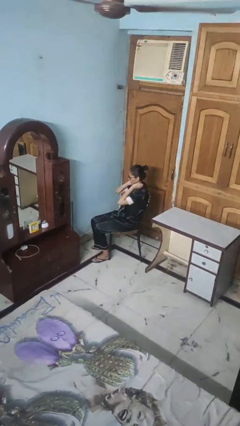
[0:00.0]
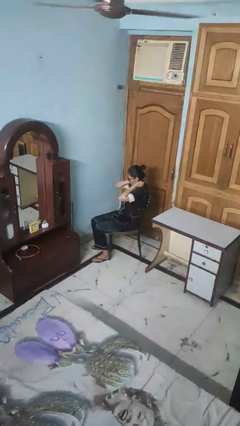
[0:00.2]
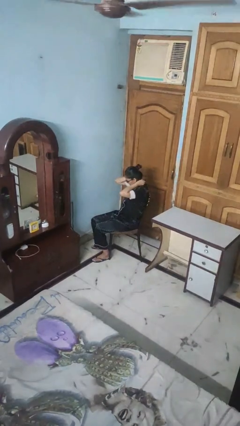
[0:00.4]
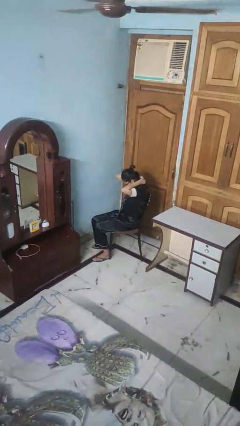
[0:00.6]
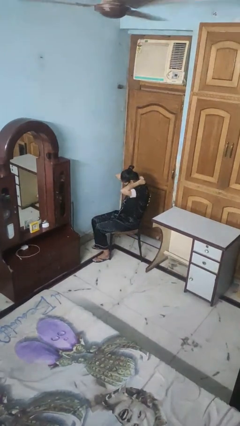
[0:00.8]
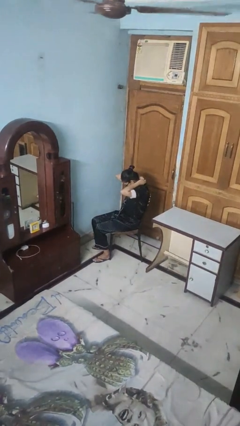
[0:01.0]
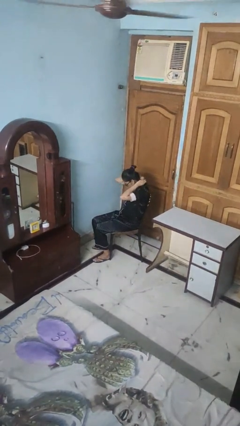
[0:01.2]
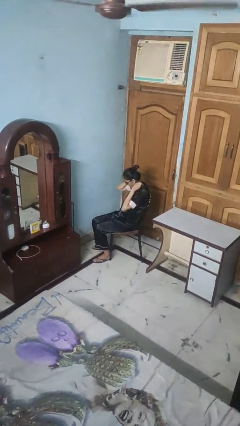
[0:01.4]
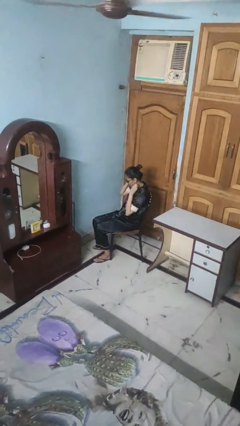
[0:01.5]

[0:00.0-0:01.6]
person takes off necklace

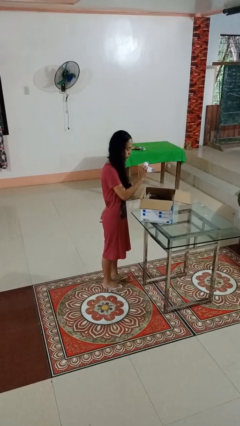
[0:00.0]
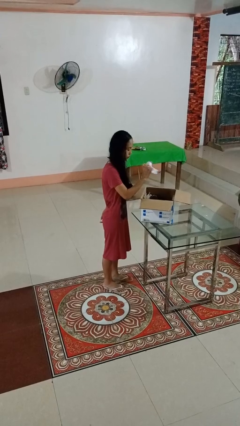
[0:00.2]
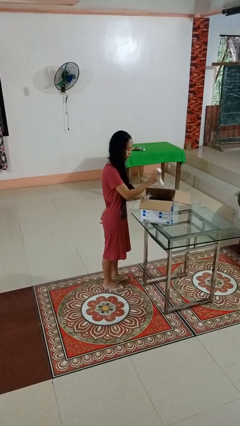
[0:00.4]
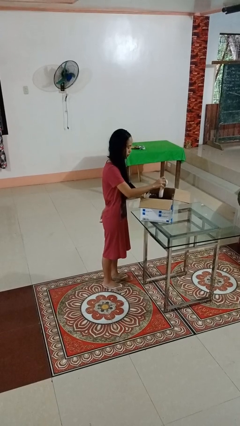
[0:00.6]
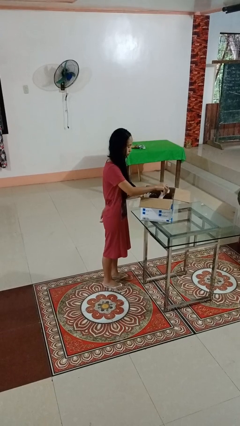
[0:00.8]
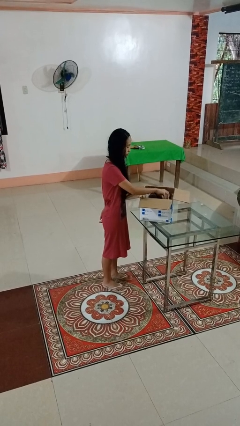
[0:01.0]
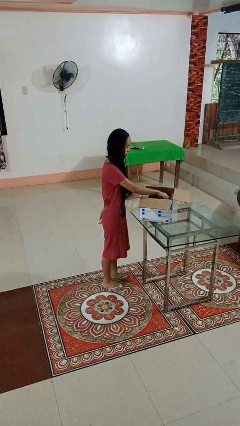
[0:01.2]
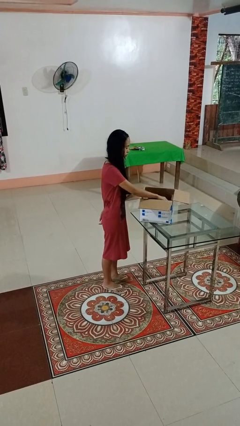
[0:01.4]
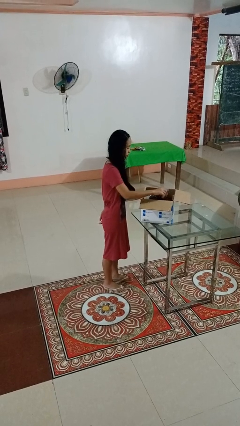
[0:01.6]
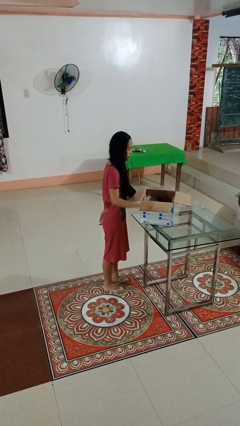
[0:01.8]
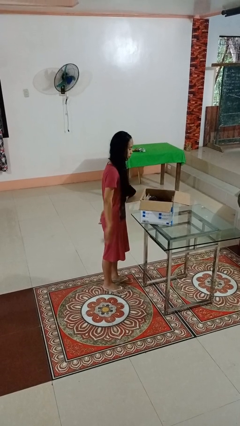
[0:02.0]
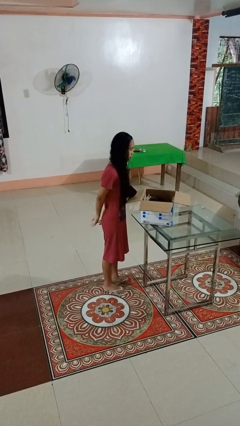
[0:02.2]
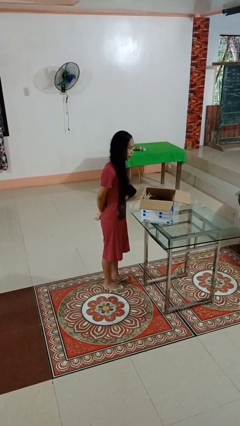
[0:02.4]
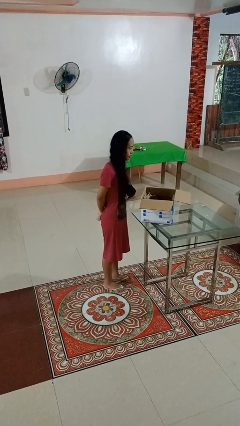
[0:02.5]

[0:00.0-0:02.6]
person puts object into box

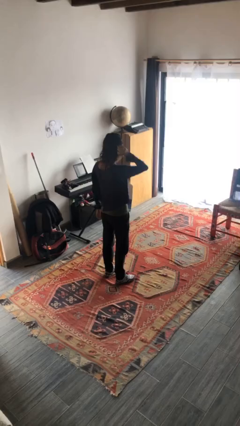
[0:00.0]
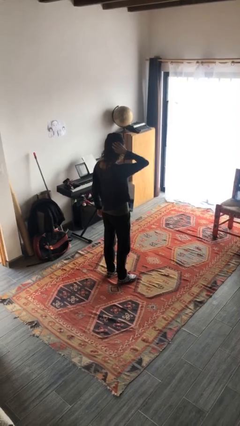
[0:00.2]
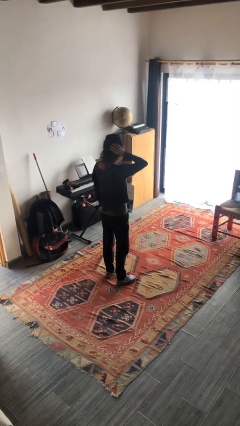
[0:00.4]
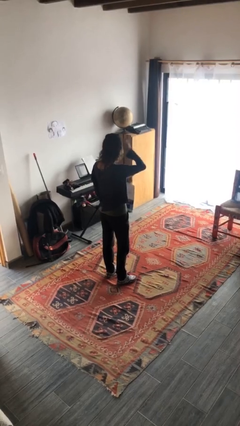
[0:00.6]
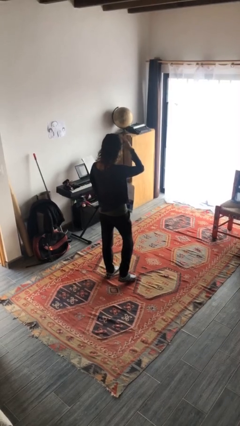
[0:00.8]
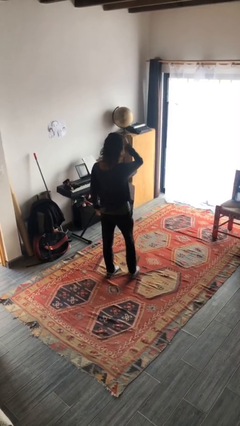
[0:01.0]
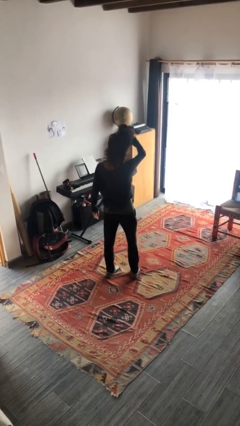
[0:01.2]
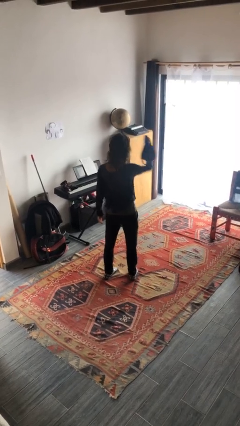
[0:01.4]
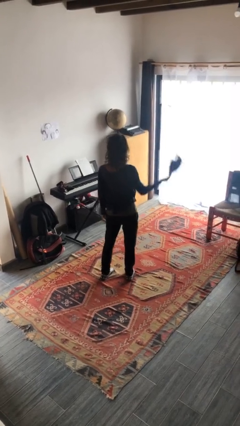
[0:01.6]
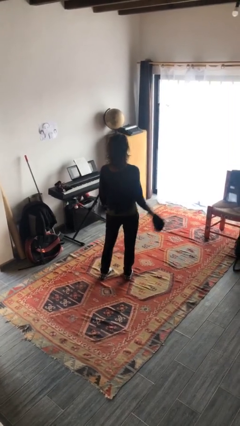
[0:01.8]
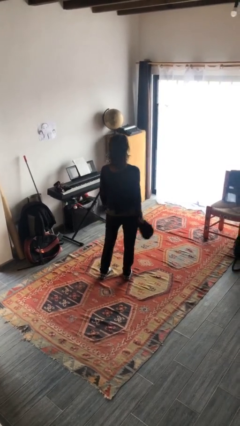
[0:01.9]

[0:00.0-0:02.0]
person takes off hat

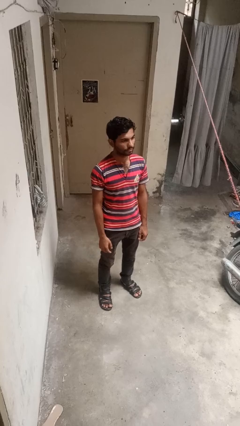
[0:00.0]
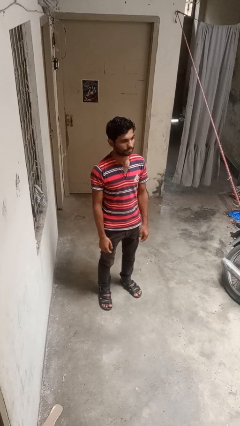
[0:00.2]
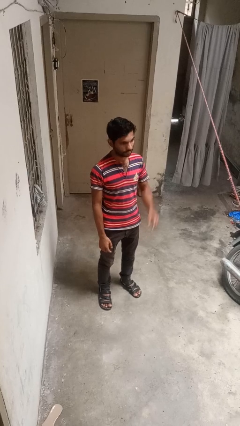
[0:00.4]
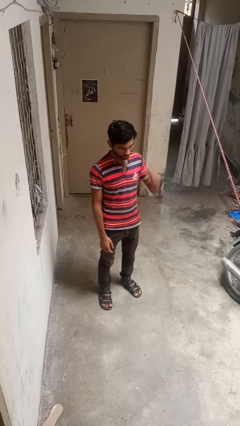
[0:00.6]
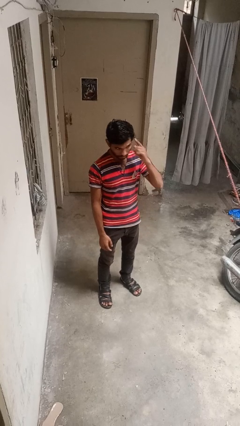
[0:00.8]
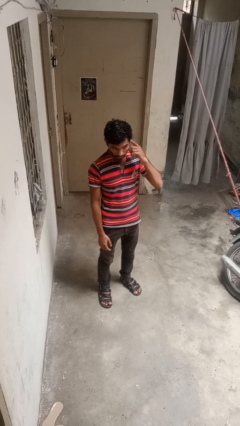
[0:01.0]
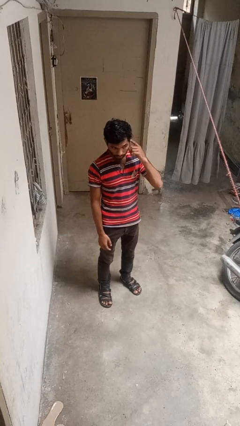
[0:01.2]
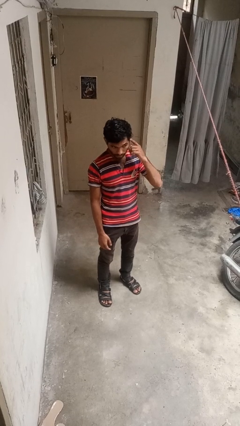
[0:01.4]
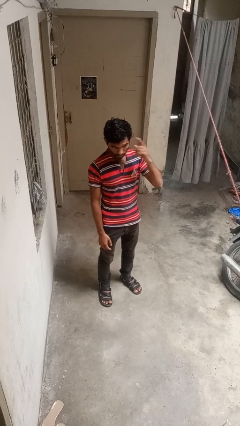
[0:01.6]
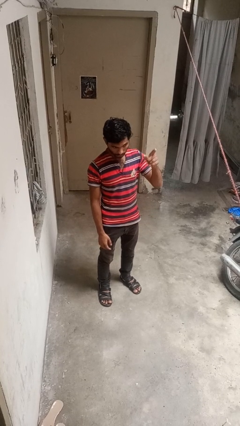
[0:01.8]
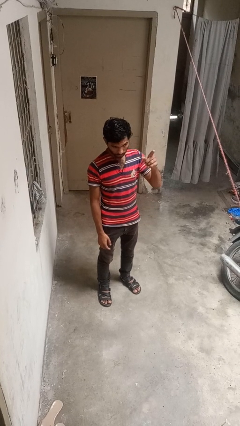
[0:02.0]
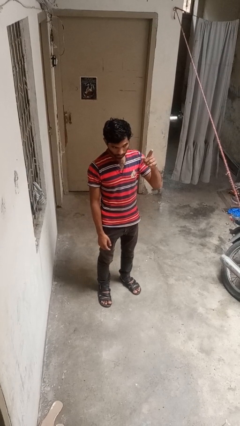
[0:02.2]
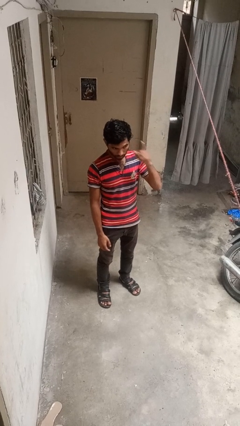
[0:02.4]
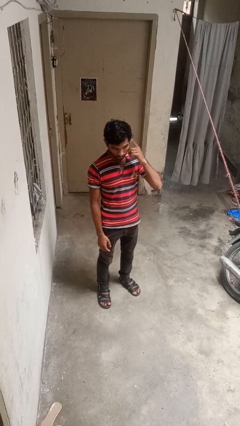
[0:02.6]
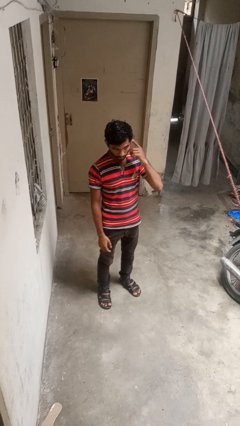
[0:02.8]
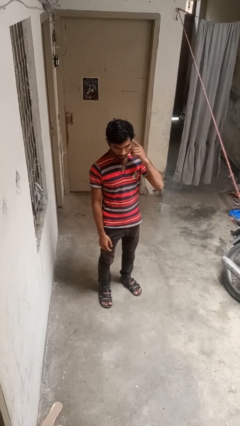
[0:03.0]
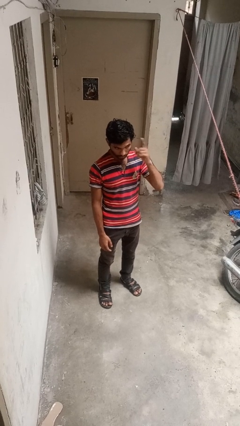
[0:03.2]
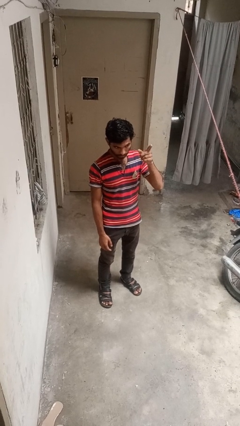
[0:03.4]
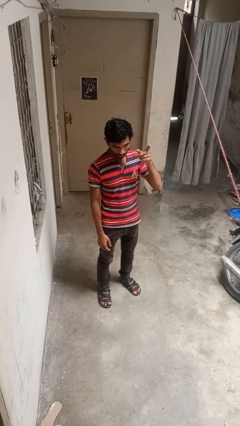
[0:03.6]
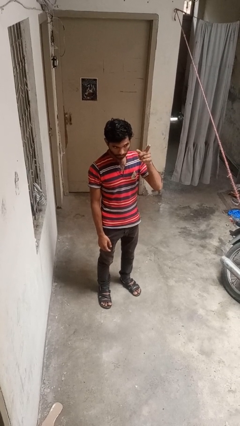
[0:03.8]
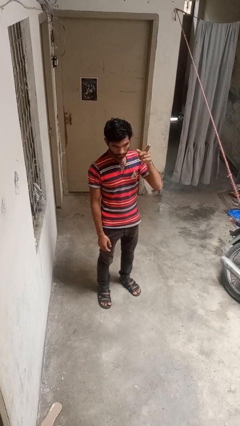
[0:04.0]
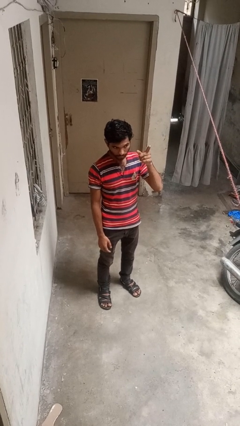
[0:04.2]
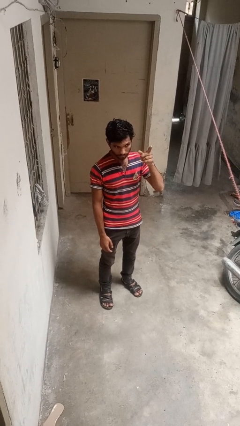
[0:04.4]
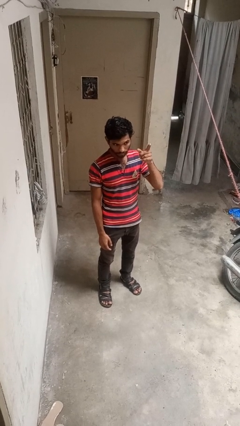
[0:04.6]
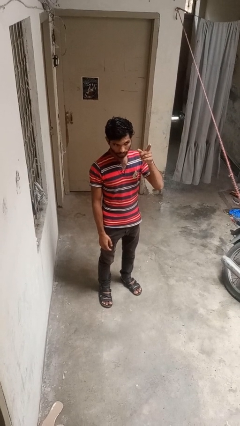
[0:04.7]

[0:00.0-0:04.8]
person gestures listen closely

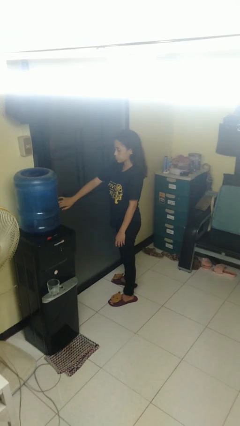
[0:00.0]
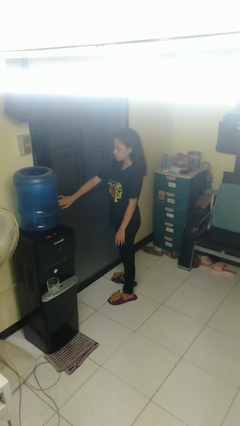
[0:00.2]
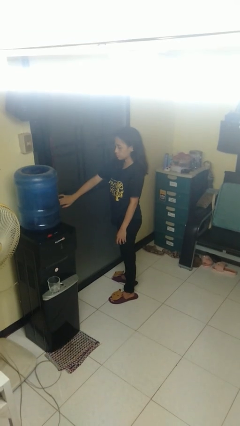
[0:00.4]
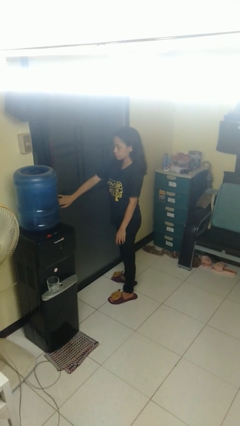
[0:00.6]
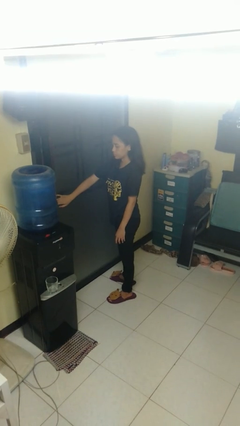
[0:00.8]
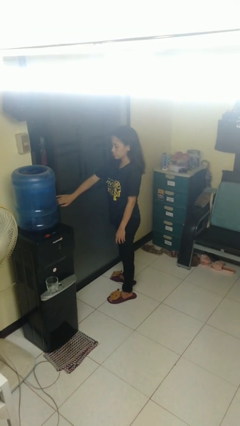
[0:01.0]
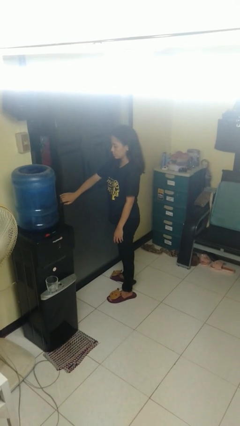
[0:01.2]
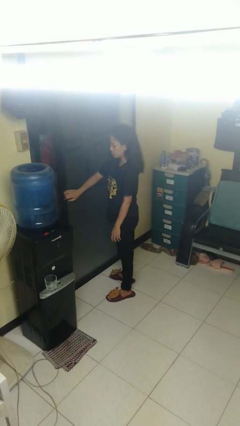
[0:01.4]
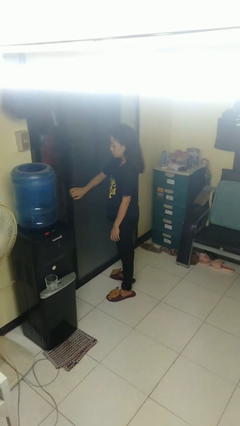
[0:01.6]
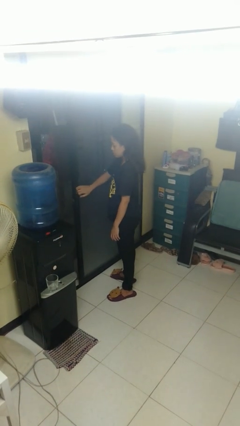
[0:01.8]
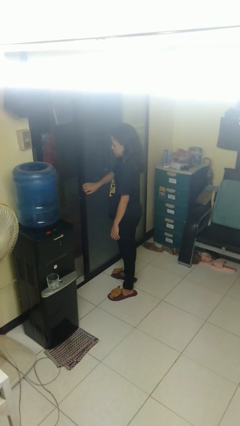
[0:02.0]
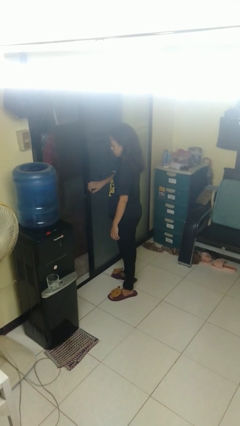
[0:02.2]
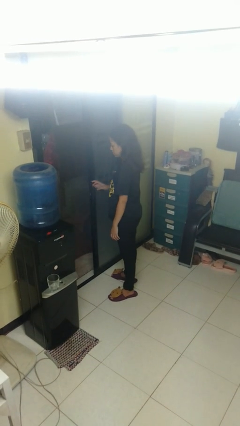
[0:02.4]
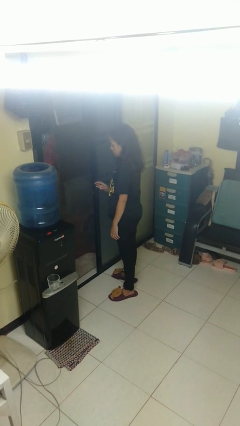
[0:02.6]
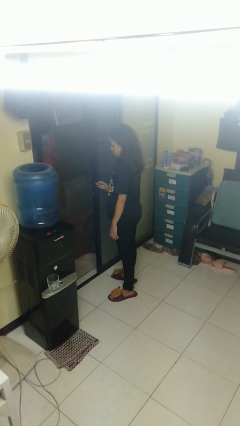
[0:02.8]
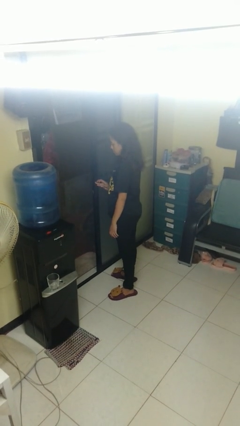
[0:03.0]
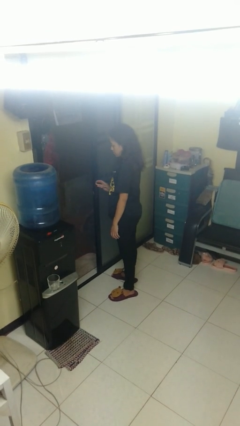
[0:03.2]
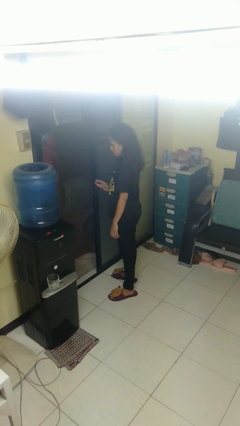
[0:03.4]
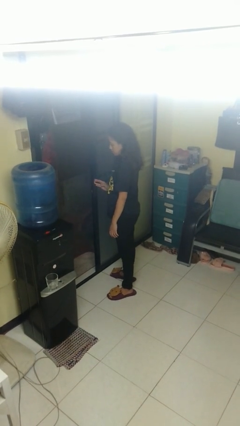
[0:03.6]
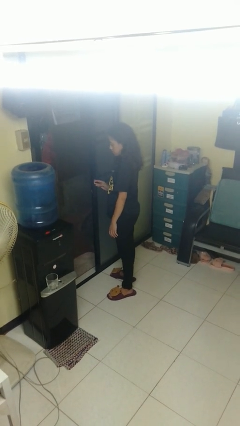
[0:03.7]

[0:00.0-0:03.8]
person opens sliding door

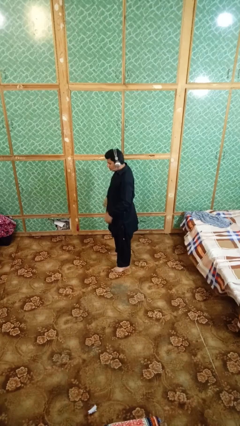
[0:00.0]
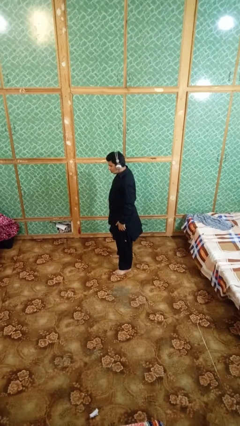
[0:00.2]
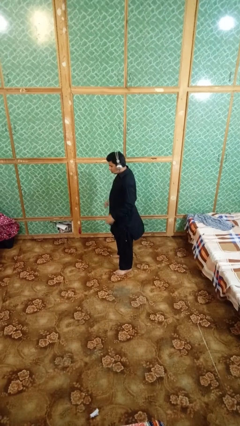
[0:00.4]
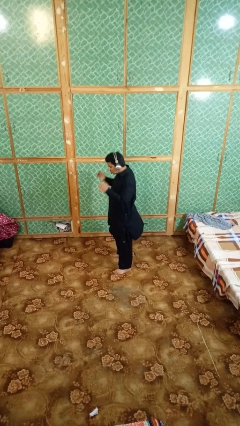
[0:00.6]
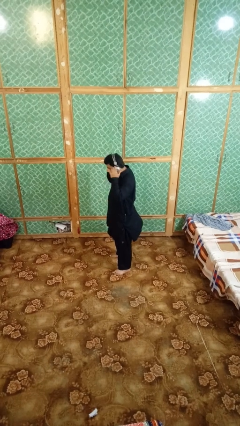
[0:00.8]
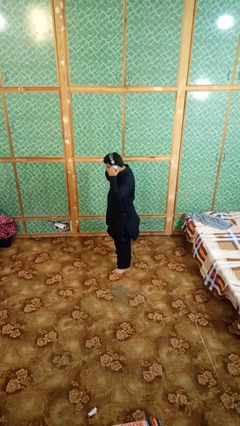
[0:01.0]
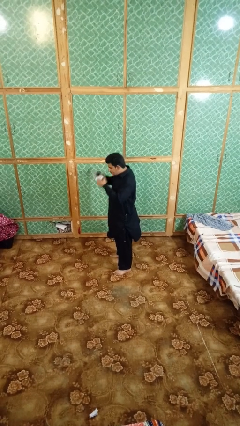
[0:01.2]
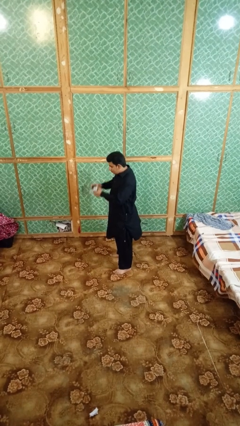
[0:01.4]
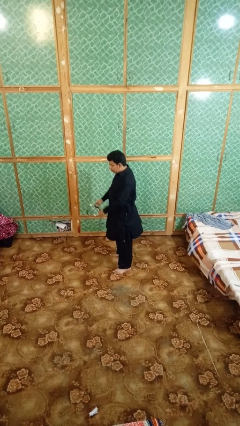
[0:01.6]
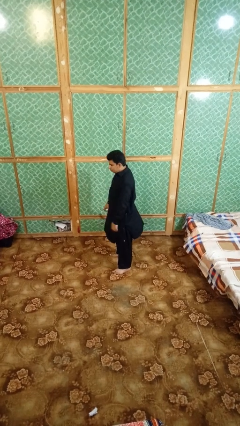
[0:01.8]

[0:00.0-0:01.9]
person takes off headphones

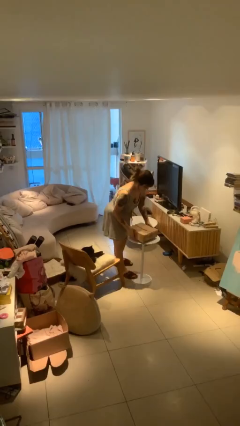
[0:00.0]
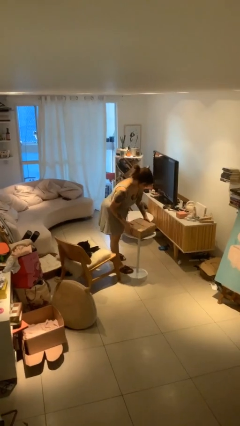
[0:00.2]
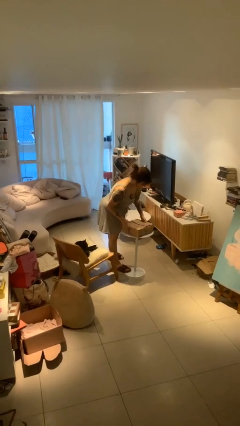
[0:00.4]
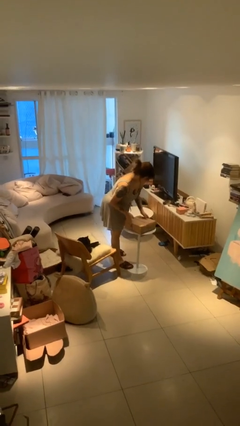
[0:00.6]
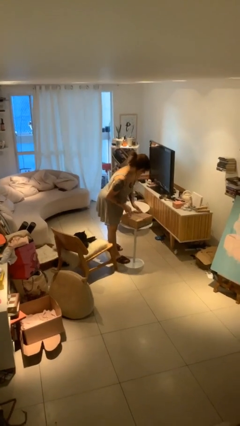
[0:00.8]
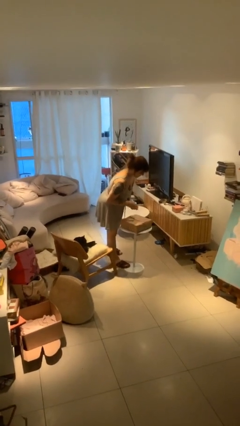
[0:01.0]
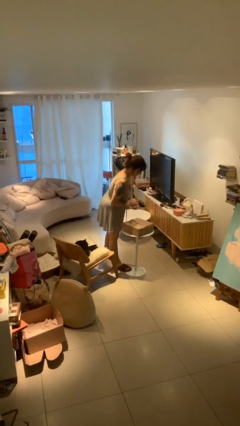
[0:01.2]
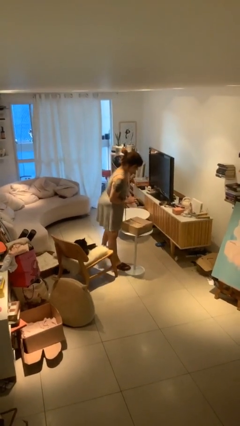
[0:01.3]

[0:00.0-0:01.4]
person puts down object on table
